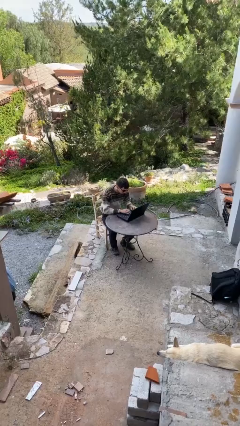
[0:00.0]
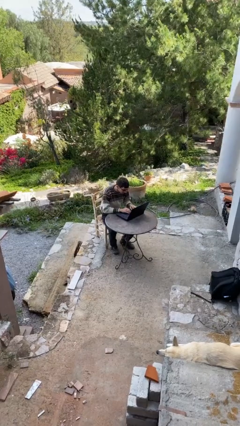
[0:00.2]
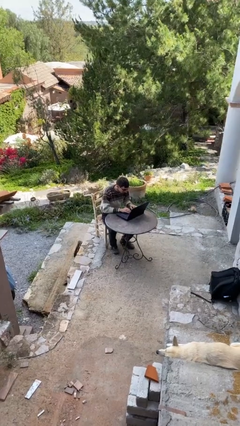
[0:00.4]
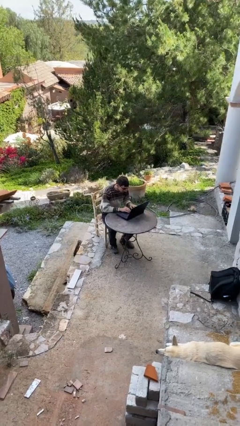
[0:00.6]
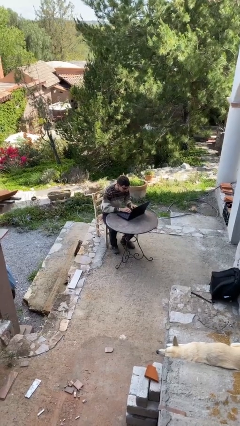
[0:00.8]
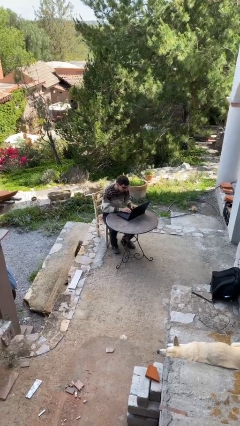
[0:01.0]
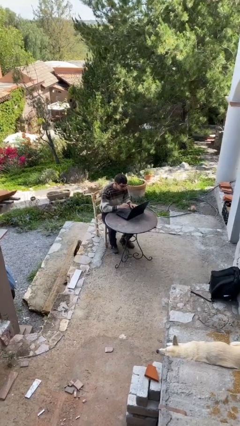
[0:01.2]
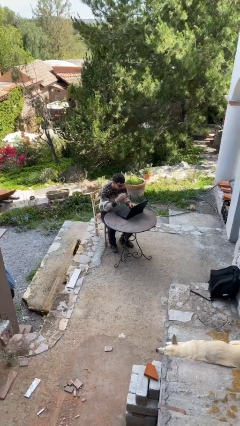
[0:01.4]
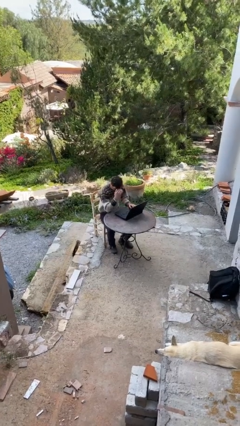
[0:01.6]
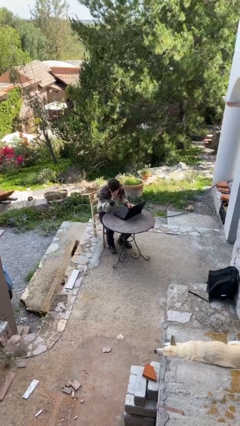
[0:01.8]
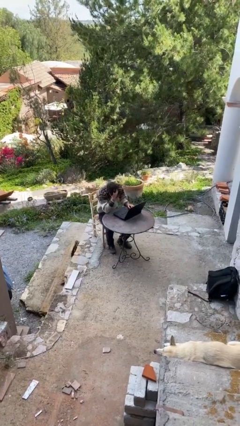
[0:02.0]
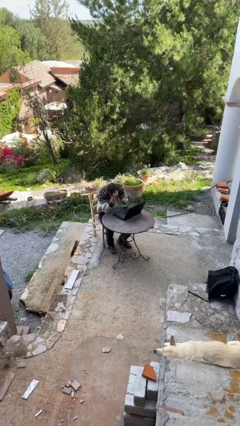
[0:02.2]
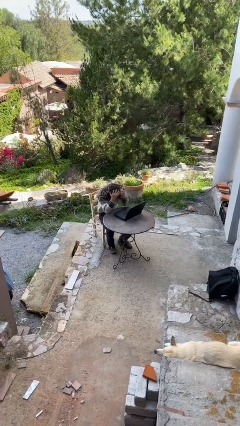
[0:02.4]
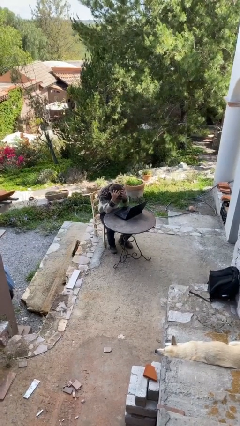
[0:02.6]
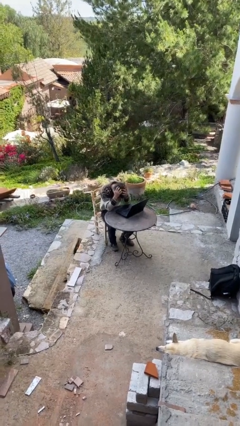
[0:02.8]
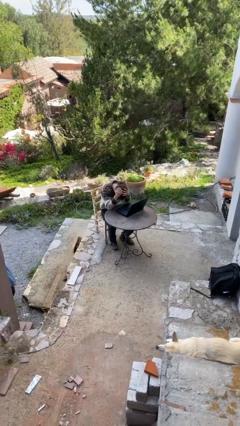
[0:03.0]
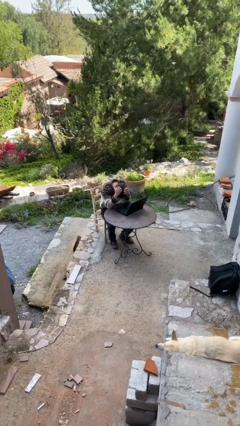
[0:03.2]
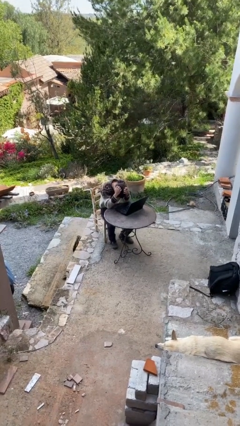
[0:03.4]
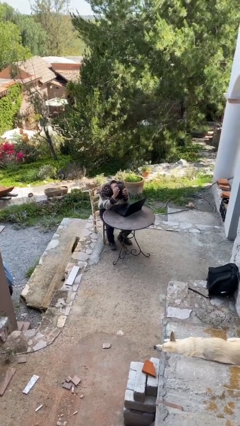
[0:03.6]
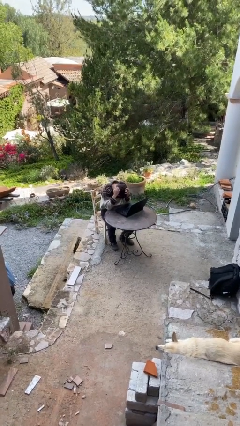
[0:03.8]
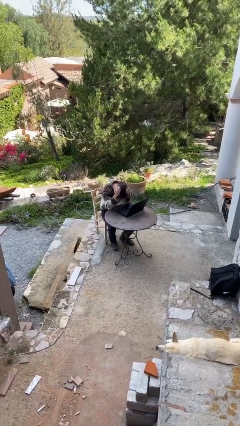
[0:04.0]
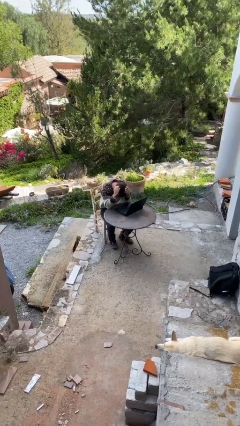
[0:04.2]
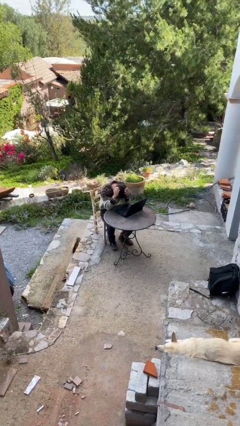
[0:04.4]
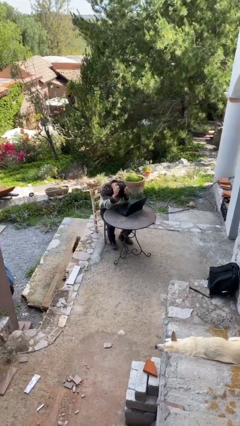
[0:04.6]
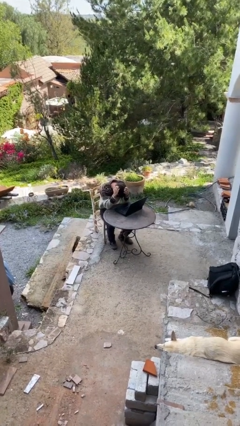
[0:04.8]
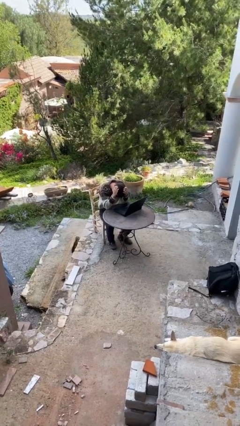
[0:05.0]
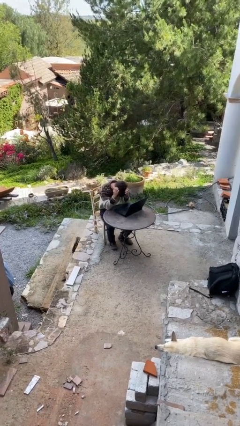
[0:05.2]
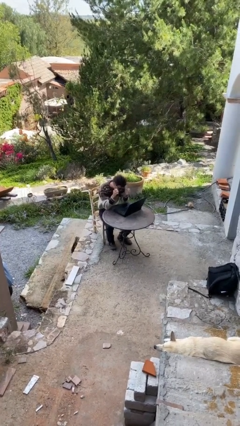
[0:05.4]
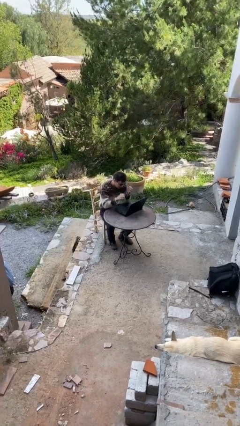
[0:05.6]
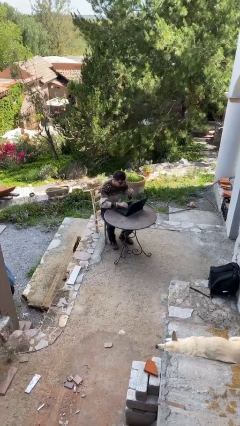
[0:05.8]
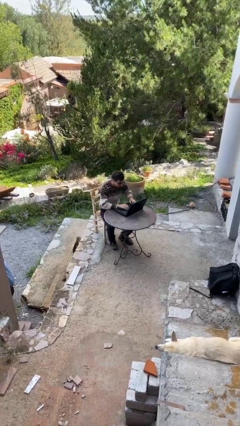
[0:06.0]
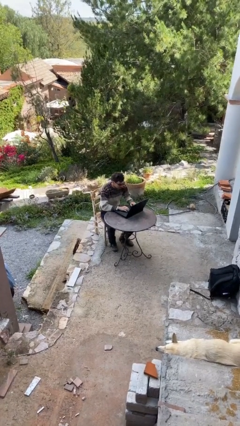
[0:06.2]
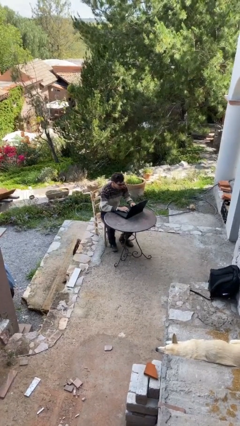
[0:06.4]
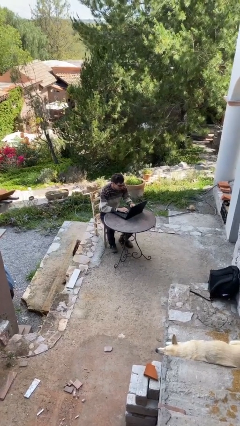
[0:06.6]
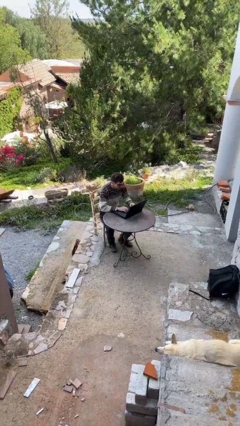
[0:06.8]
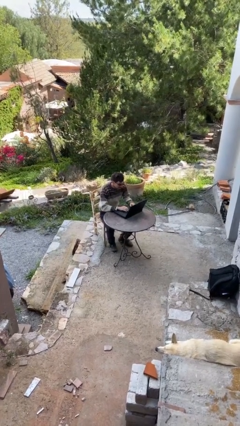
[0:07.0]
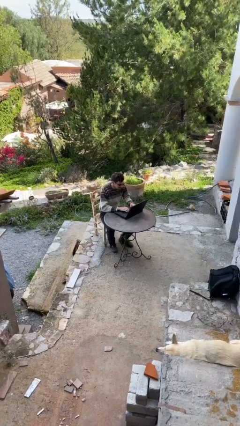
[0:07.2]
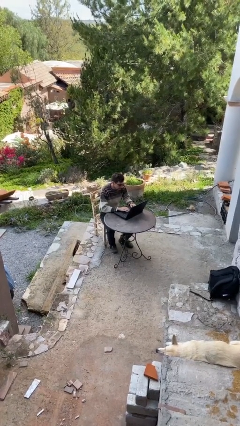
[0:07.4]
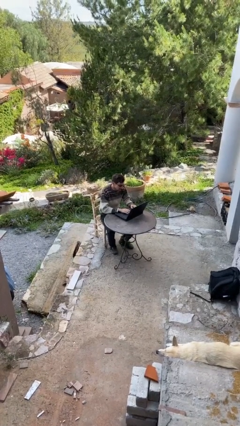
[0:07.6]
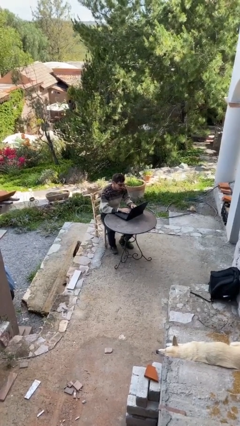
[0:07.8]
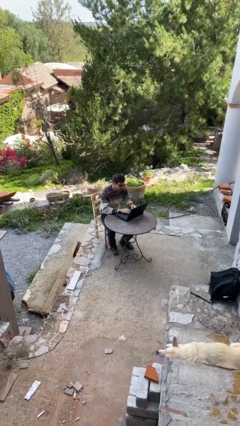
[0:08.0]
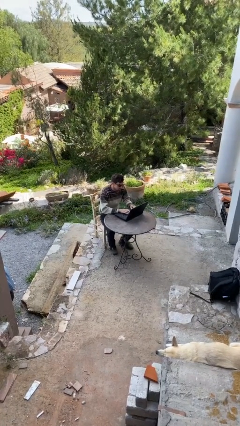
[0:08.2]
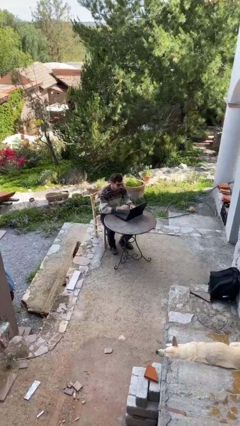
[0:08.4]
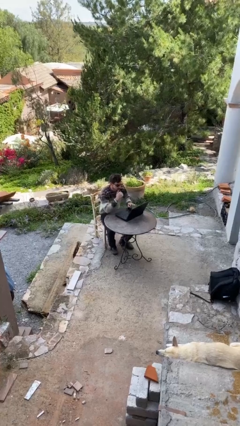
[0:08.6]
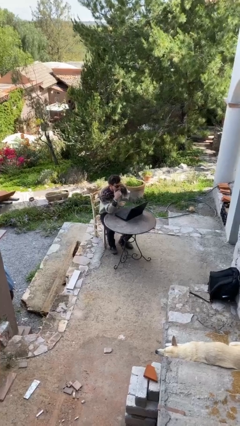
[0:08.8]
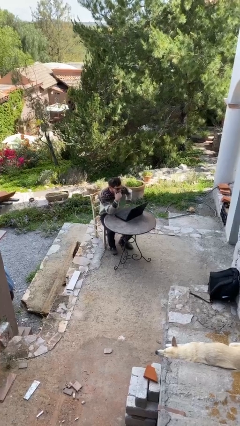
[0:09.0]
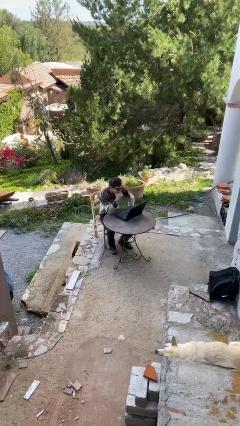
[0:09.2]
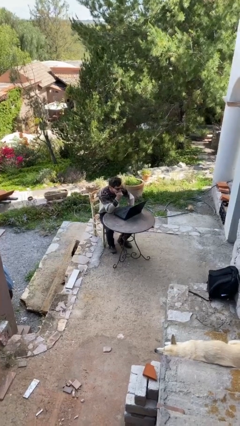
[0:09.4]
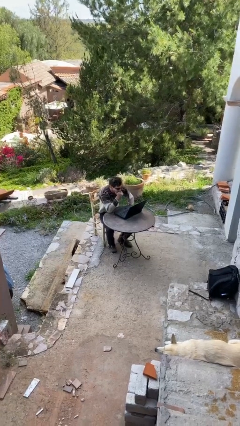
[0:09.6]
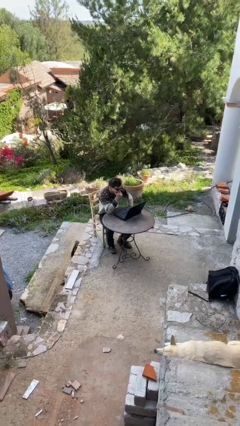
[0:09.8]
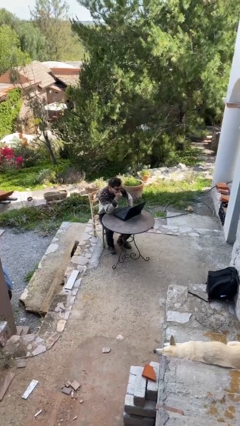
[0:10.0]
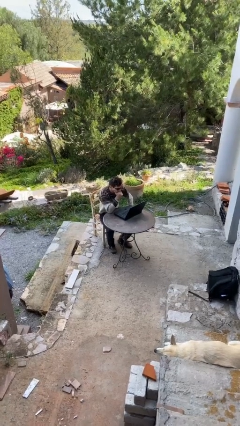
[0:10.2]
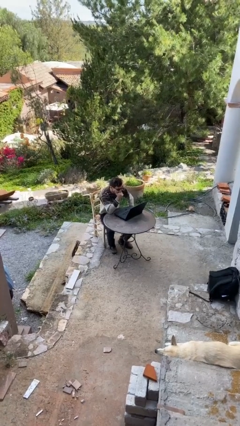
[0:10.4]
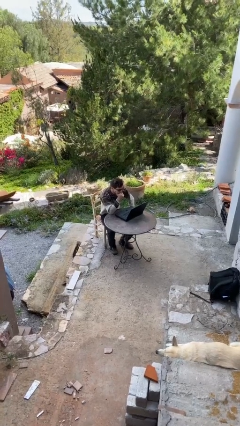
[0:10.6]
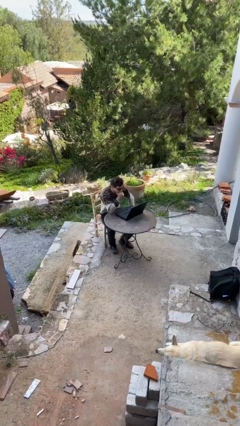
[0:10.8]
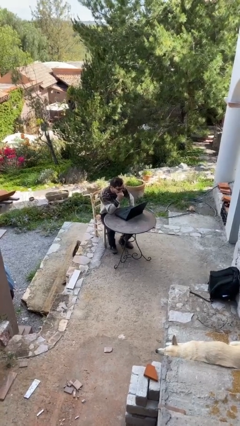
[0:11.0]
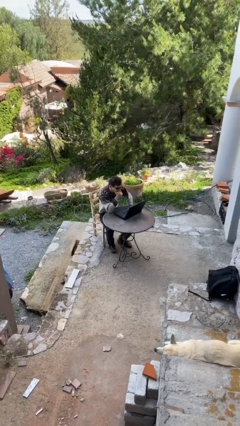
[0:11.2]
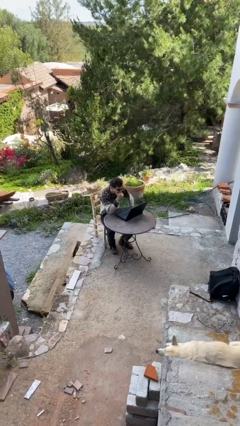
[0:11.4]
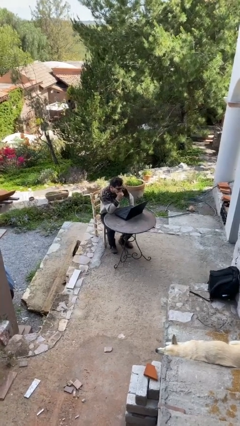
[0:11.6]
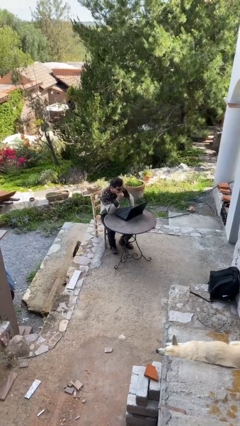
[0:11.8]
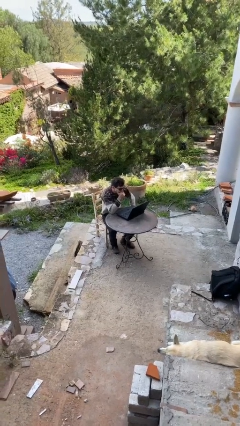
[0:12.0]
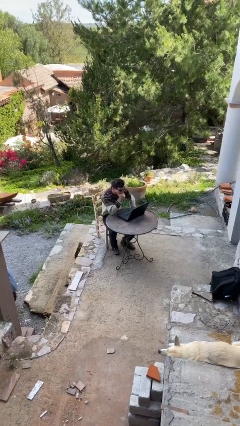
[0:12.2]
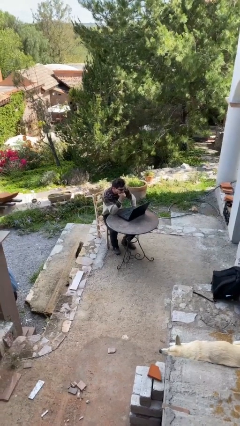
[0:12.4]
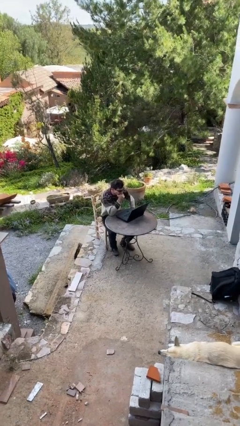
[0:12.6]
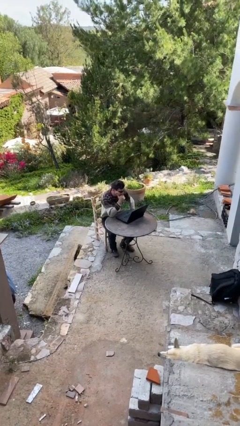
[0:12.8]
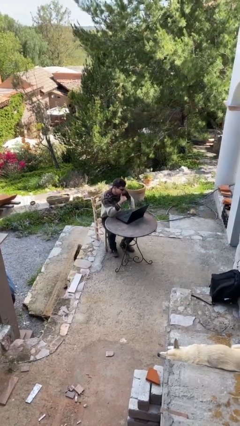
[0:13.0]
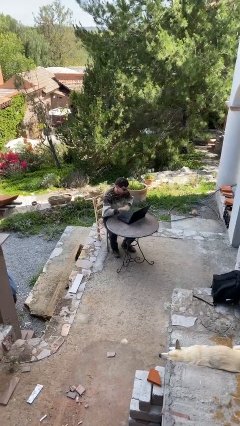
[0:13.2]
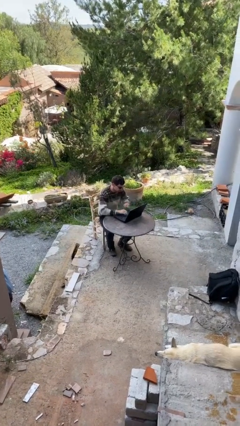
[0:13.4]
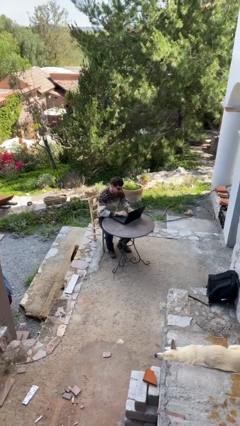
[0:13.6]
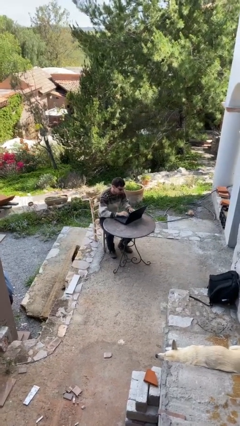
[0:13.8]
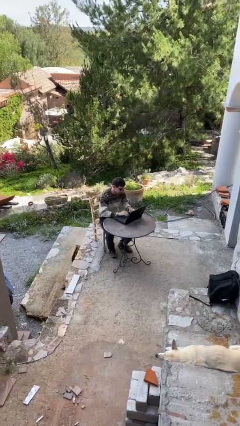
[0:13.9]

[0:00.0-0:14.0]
person interacts with laptop

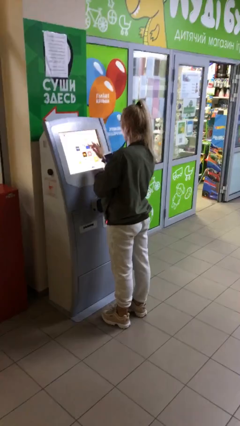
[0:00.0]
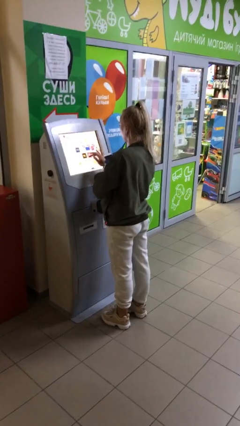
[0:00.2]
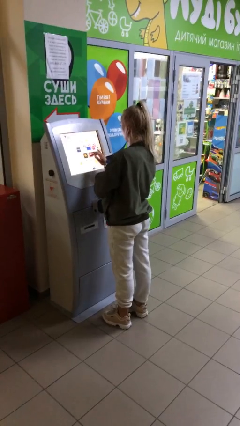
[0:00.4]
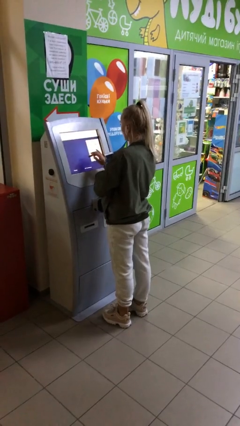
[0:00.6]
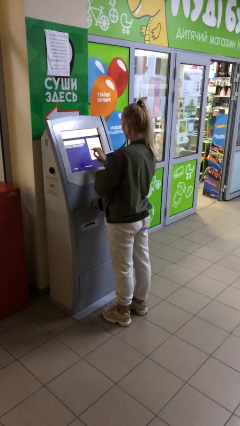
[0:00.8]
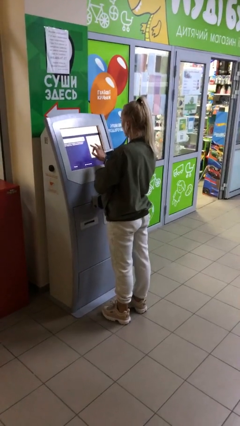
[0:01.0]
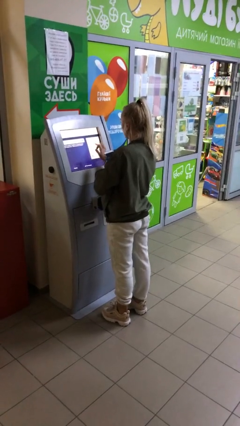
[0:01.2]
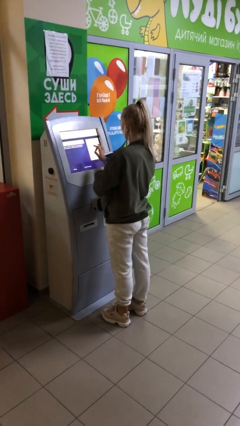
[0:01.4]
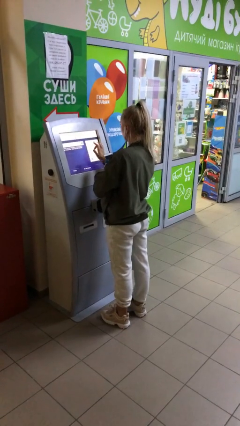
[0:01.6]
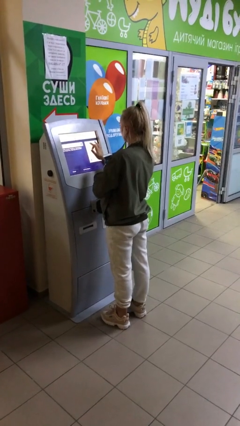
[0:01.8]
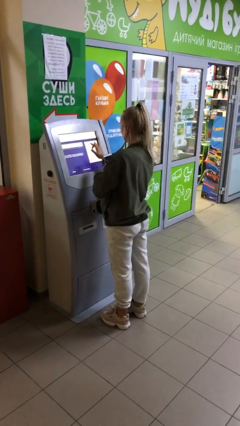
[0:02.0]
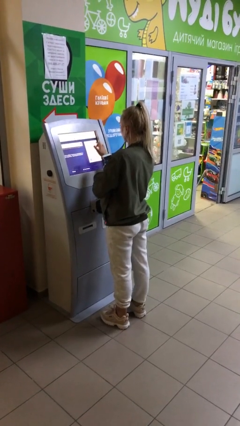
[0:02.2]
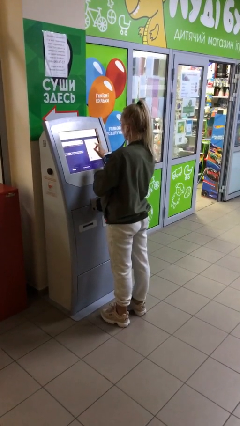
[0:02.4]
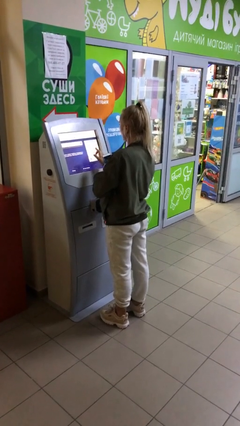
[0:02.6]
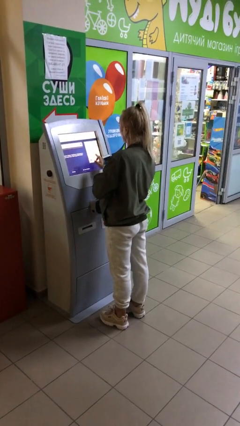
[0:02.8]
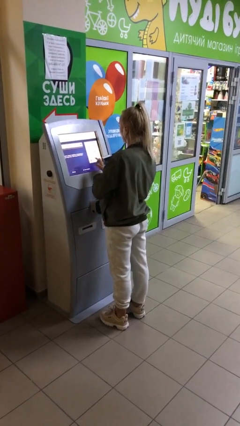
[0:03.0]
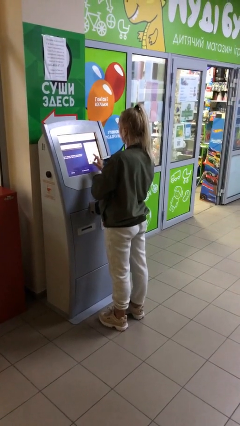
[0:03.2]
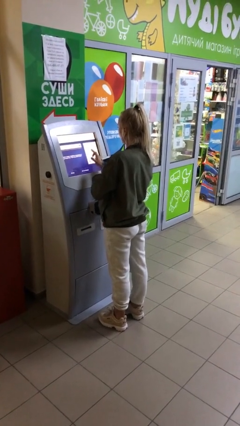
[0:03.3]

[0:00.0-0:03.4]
person purchases from machine

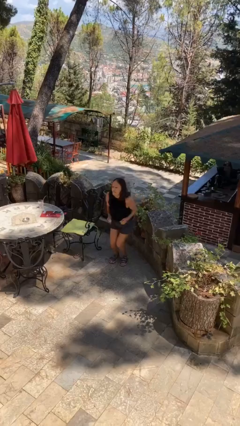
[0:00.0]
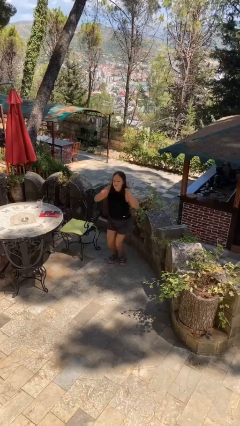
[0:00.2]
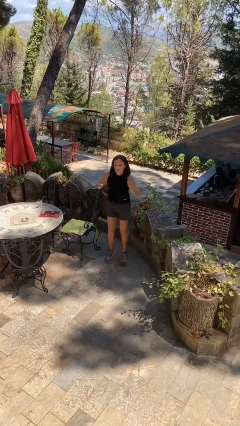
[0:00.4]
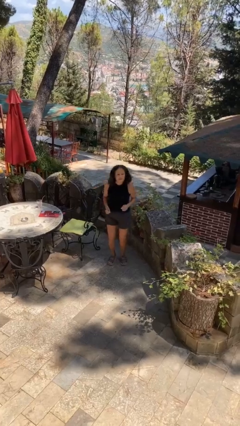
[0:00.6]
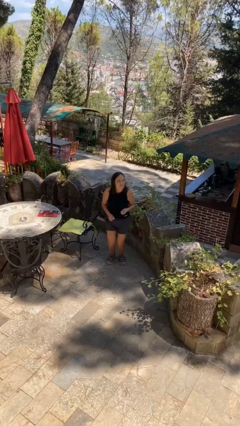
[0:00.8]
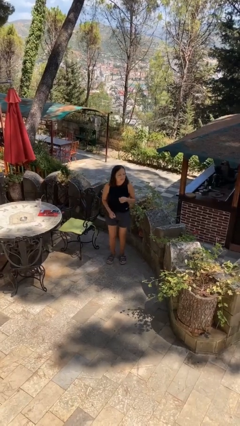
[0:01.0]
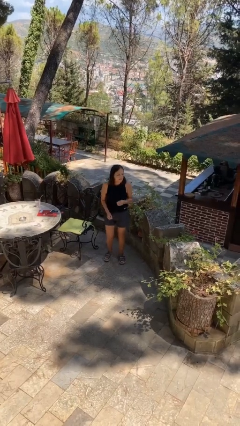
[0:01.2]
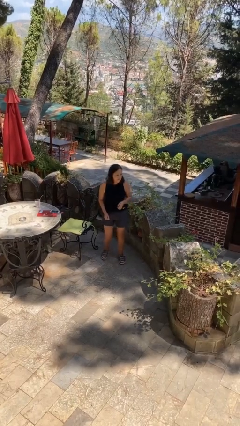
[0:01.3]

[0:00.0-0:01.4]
person jumps
